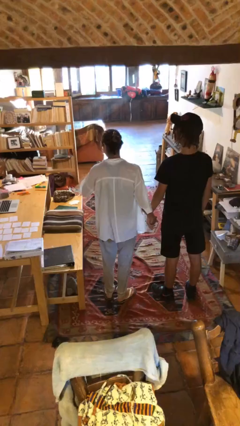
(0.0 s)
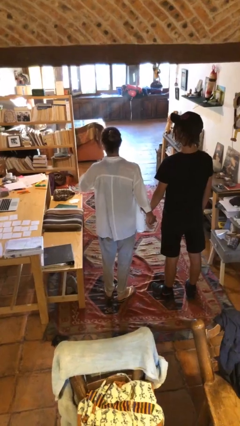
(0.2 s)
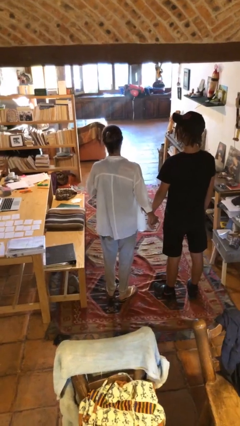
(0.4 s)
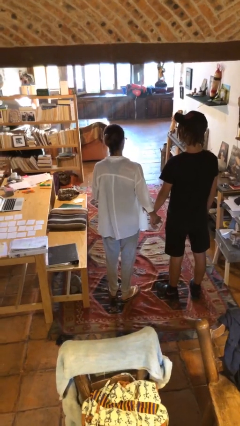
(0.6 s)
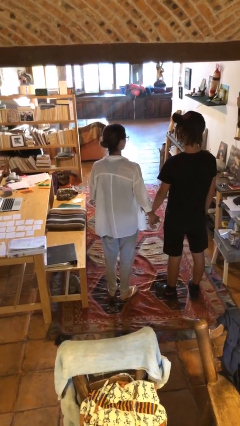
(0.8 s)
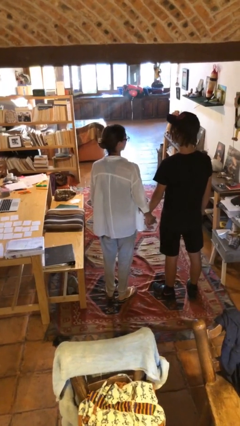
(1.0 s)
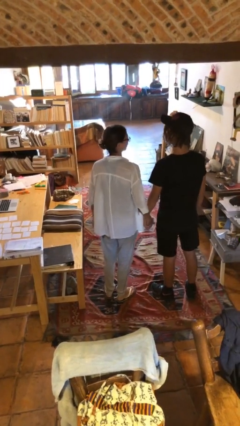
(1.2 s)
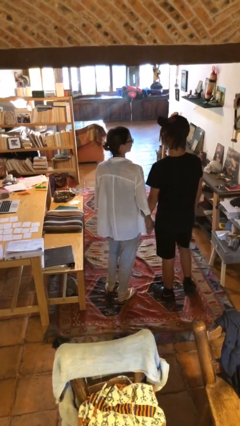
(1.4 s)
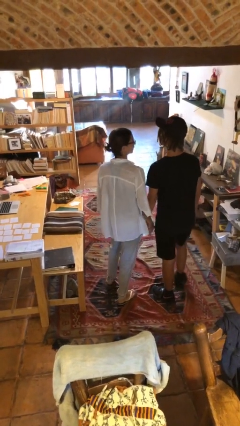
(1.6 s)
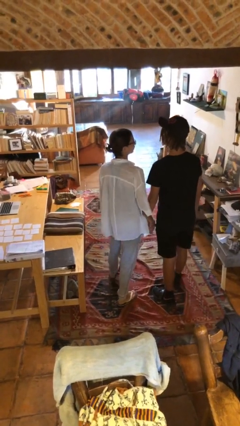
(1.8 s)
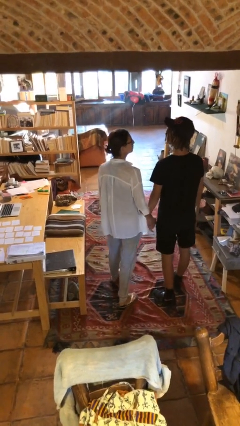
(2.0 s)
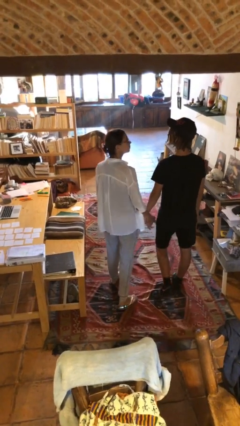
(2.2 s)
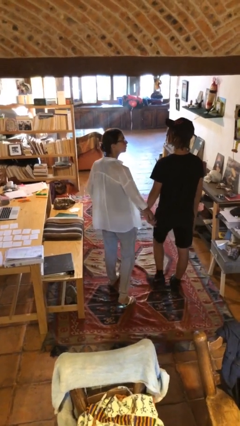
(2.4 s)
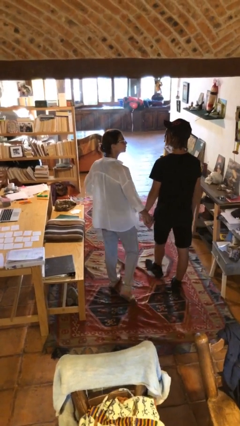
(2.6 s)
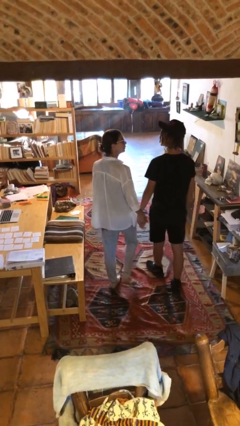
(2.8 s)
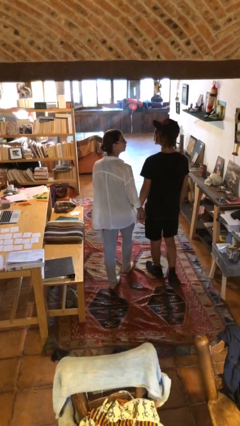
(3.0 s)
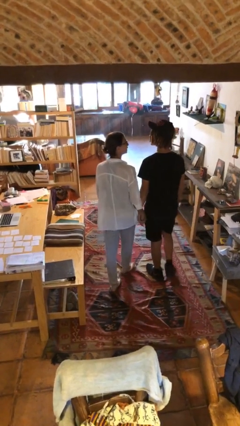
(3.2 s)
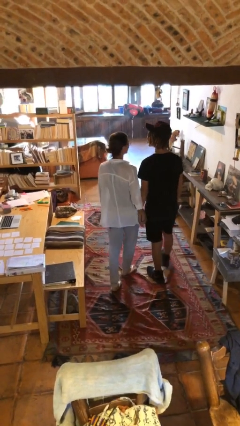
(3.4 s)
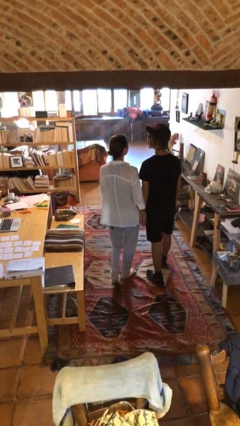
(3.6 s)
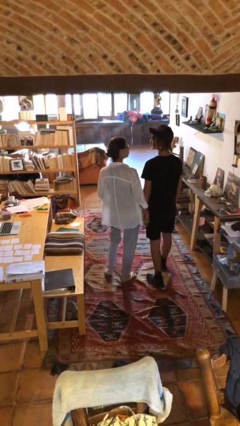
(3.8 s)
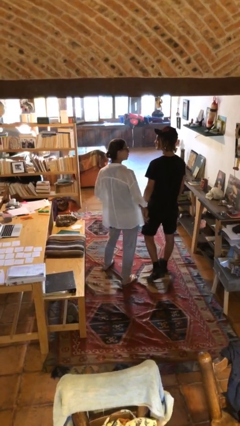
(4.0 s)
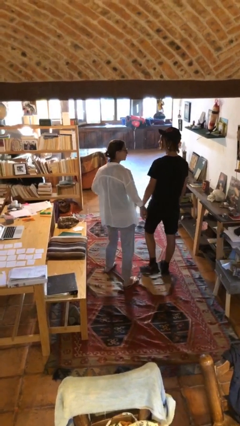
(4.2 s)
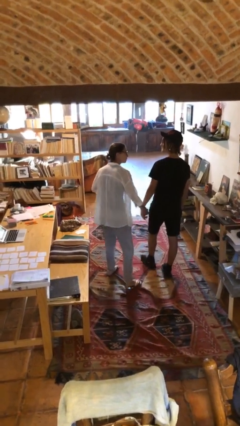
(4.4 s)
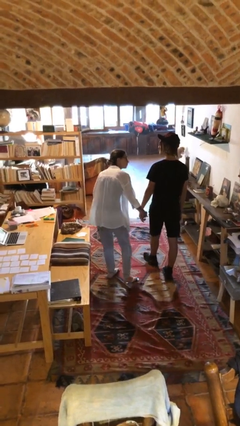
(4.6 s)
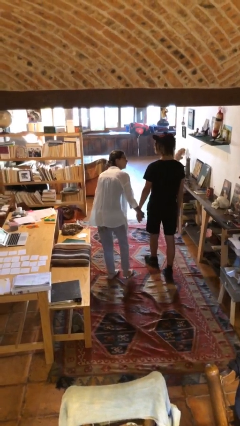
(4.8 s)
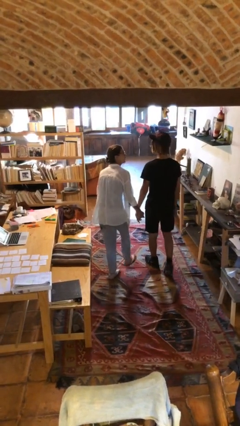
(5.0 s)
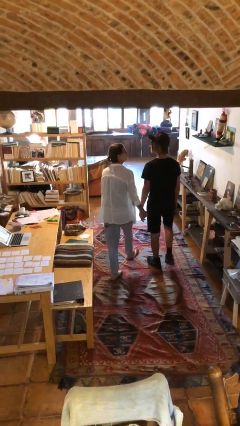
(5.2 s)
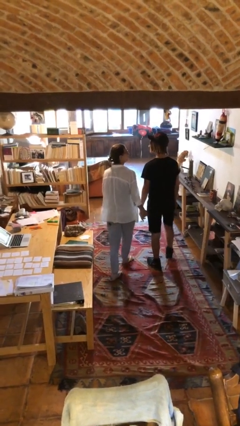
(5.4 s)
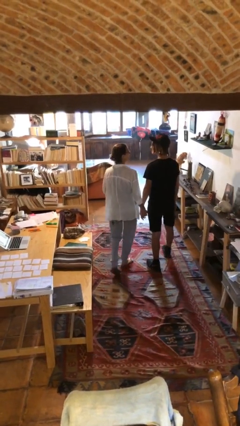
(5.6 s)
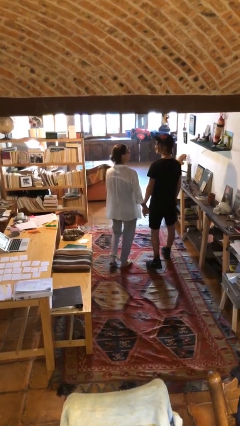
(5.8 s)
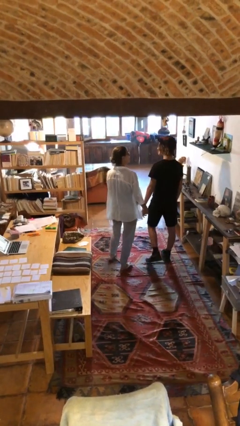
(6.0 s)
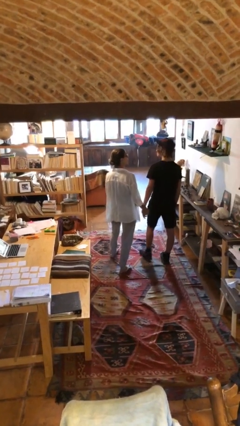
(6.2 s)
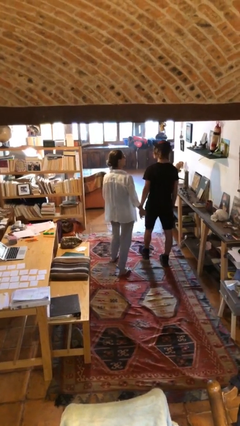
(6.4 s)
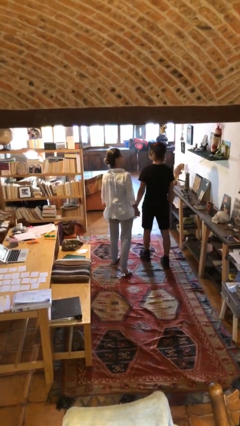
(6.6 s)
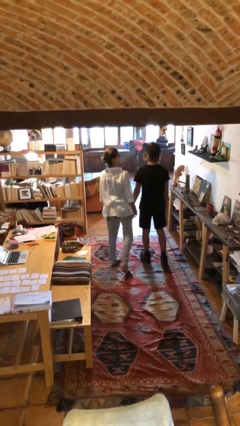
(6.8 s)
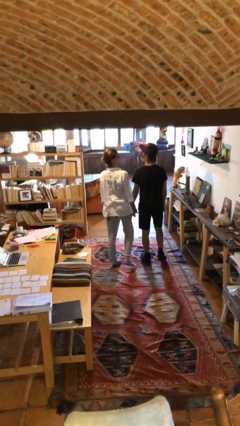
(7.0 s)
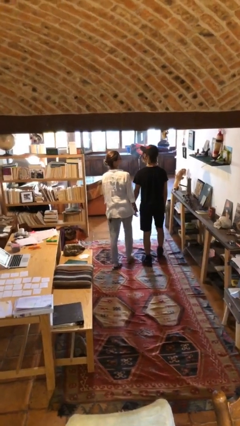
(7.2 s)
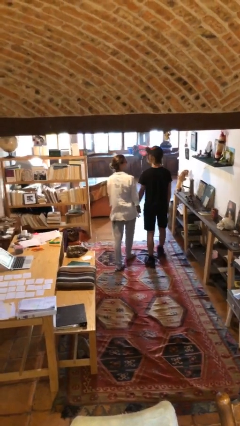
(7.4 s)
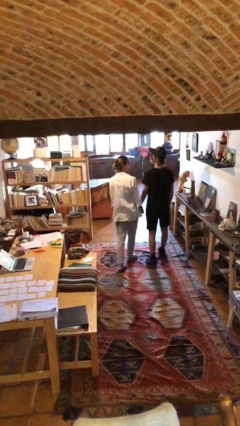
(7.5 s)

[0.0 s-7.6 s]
person holds hand

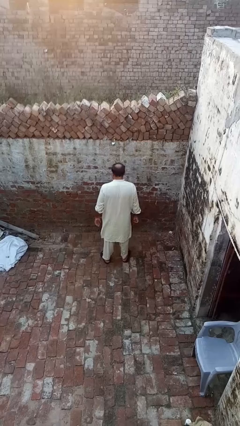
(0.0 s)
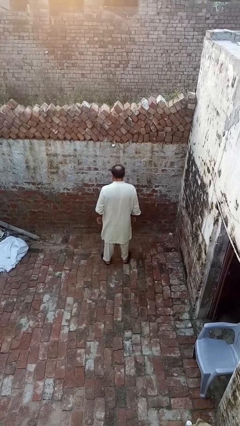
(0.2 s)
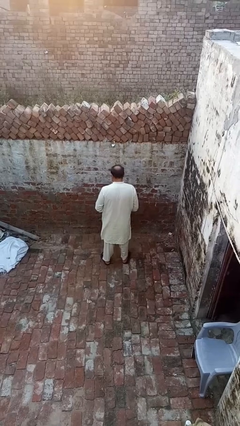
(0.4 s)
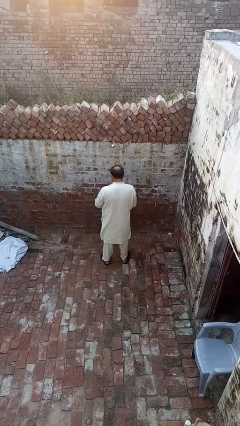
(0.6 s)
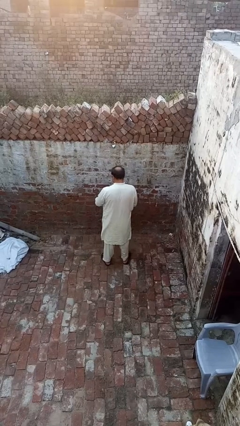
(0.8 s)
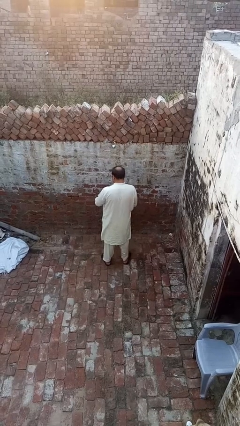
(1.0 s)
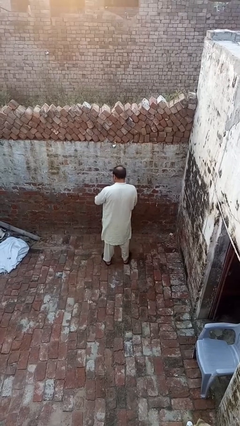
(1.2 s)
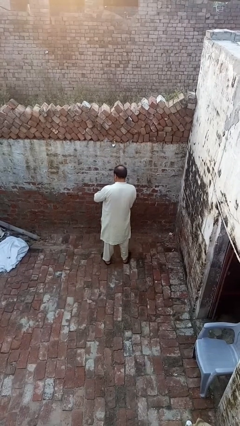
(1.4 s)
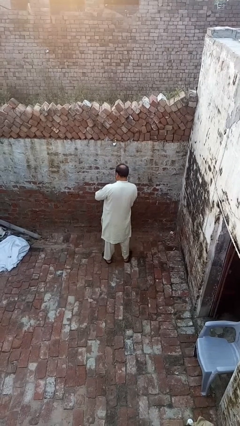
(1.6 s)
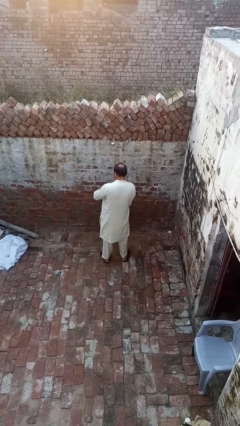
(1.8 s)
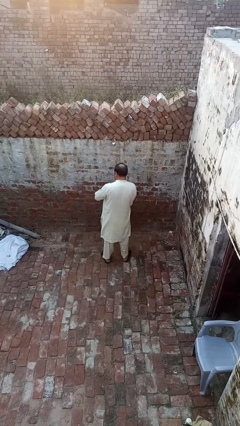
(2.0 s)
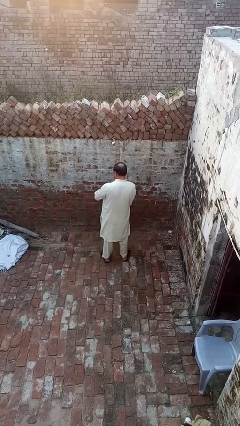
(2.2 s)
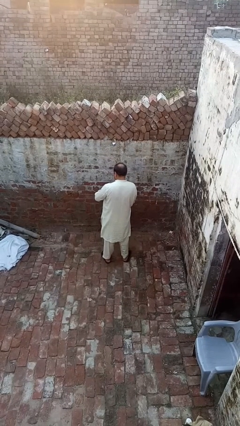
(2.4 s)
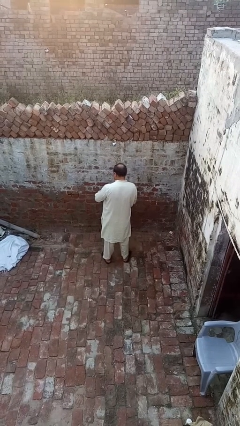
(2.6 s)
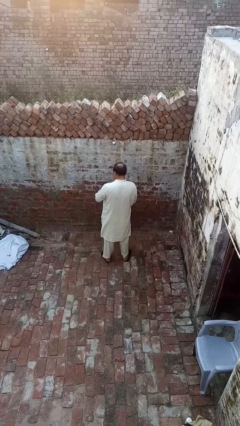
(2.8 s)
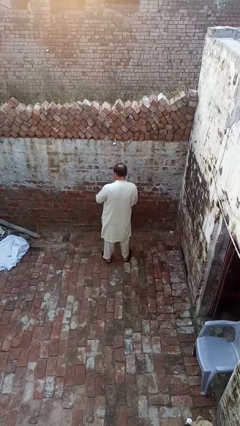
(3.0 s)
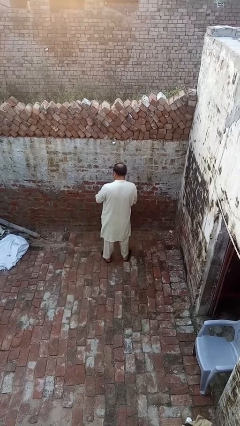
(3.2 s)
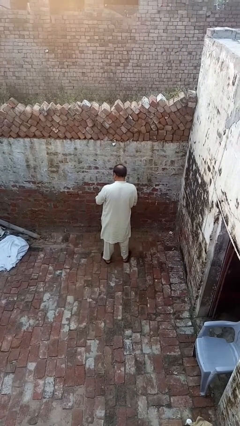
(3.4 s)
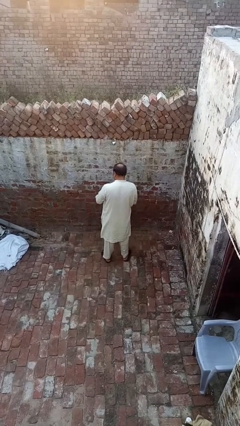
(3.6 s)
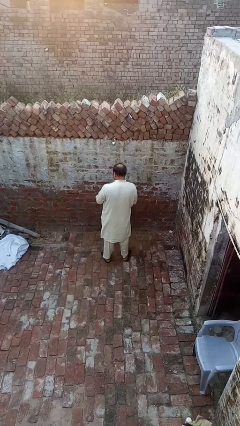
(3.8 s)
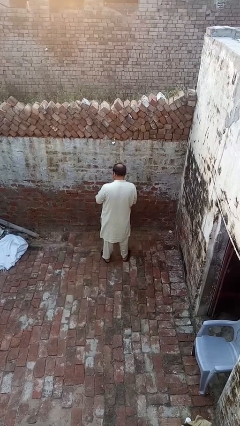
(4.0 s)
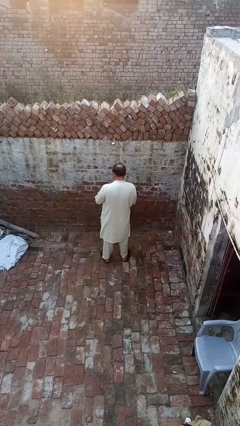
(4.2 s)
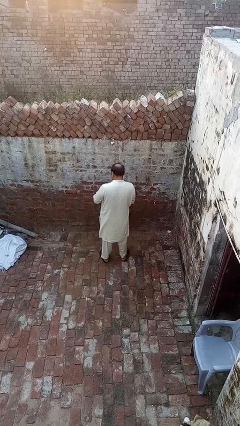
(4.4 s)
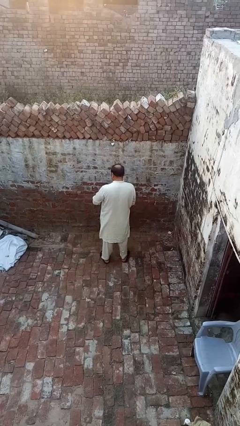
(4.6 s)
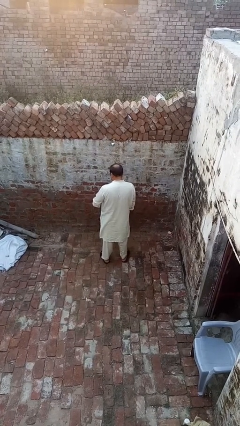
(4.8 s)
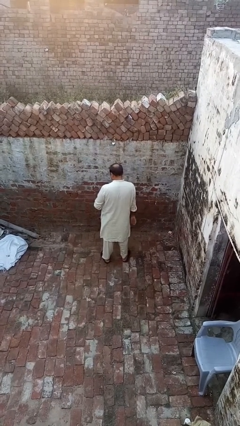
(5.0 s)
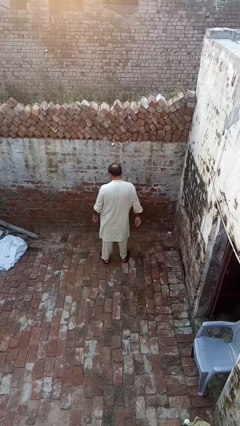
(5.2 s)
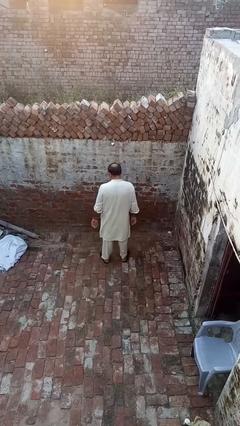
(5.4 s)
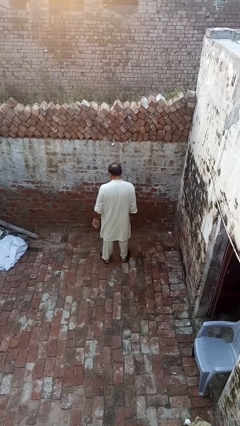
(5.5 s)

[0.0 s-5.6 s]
person puts on wristwatch

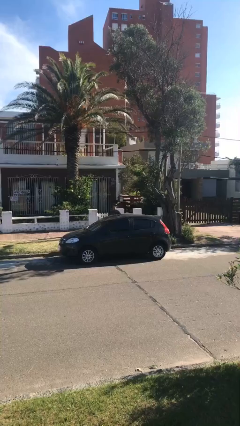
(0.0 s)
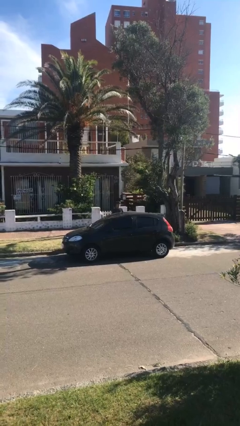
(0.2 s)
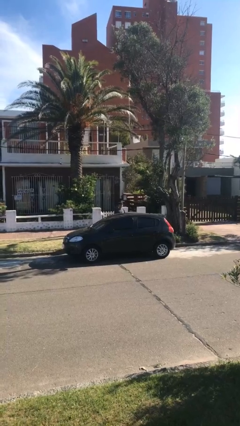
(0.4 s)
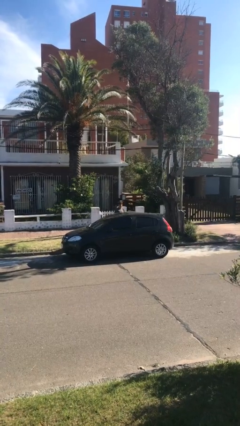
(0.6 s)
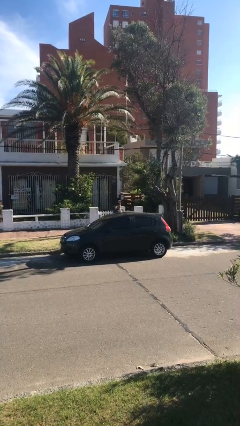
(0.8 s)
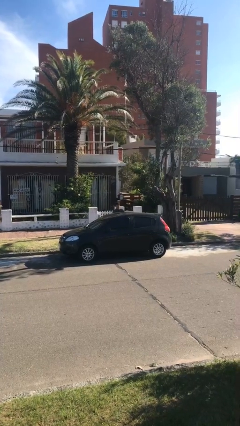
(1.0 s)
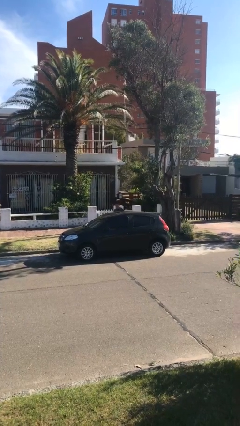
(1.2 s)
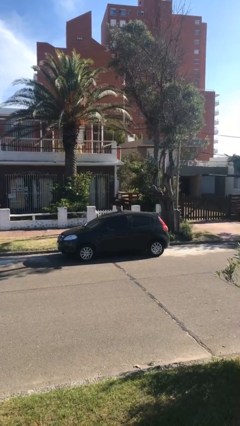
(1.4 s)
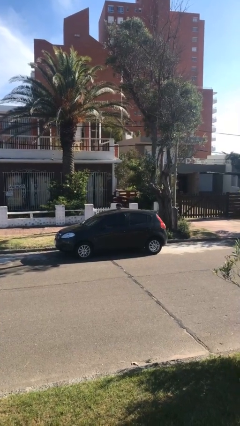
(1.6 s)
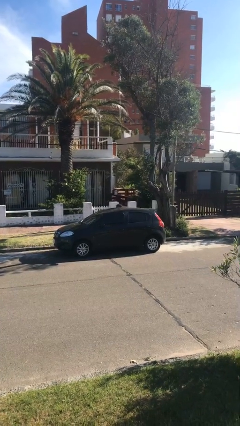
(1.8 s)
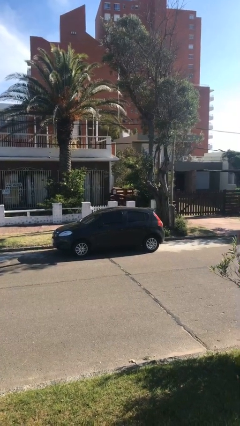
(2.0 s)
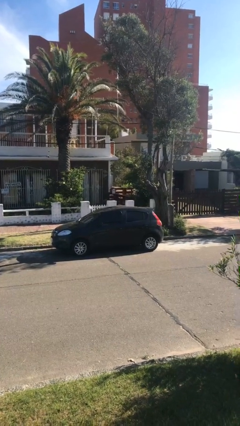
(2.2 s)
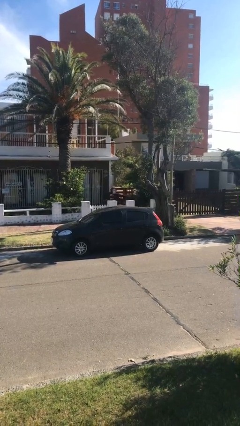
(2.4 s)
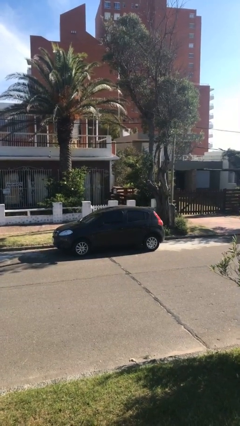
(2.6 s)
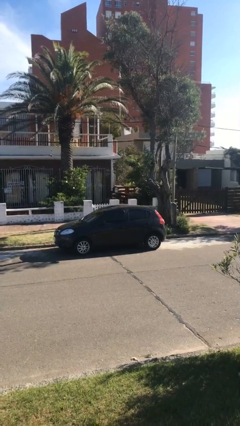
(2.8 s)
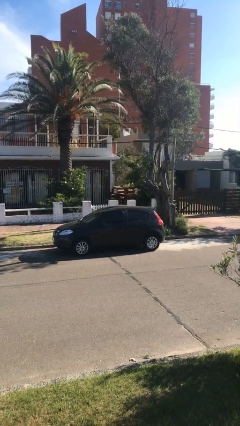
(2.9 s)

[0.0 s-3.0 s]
person enters car

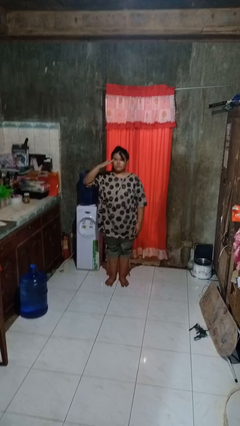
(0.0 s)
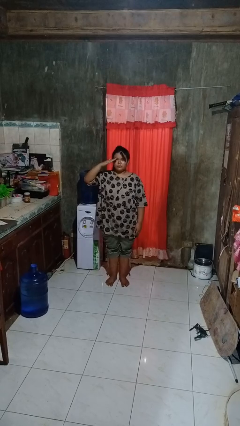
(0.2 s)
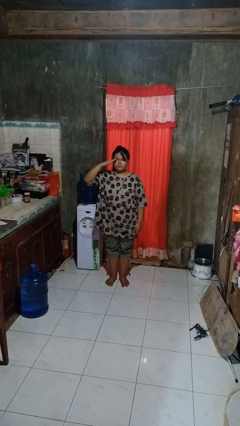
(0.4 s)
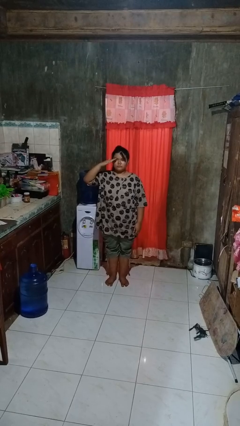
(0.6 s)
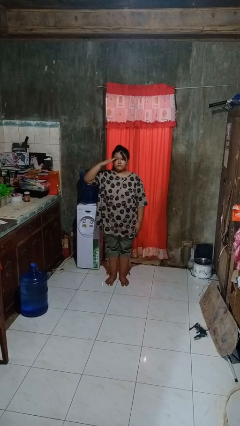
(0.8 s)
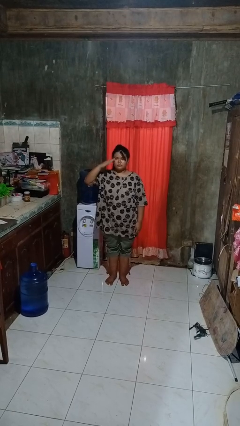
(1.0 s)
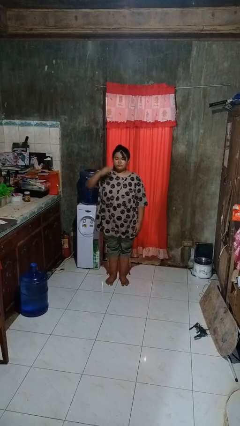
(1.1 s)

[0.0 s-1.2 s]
person salutes

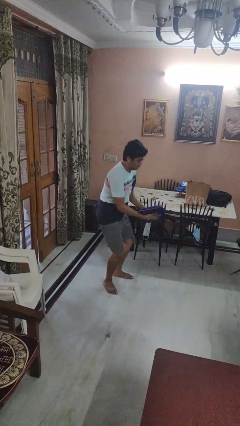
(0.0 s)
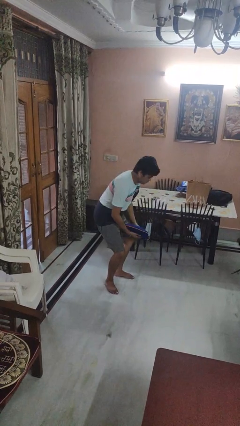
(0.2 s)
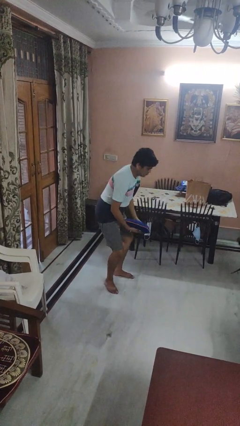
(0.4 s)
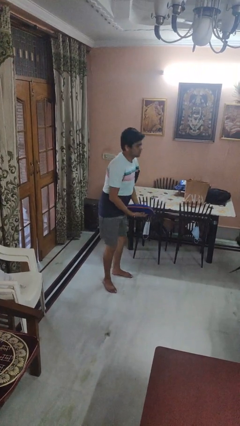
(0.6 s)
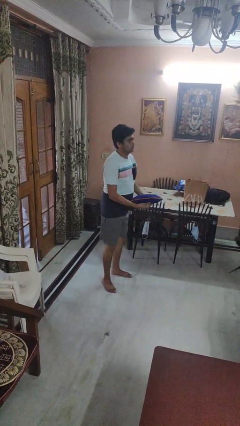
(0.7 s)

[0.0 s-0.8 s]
person catches dropped object
